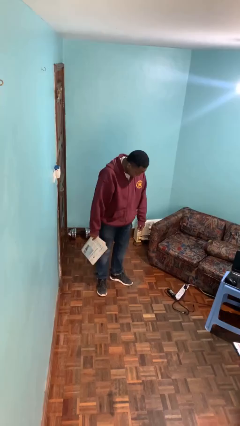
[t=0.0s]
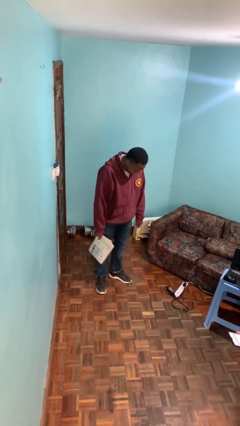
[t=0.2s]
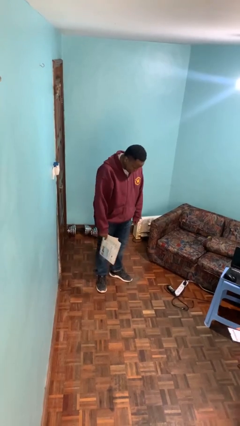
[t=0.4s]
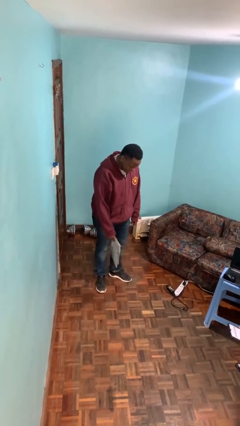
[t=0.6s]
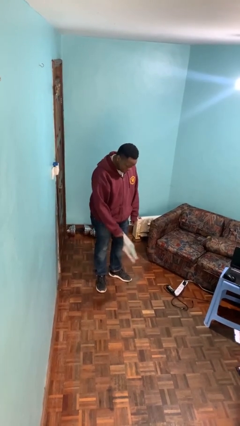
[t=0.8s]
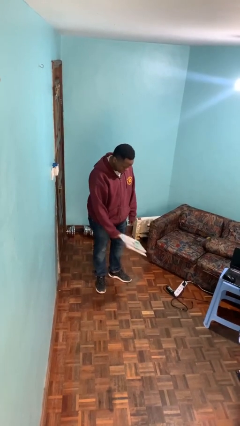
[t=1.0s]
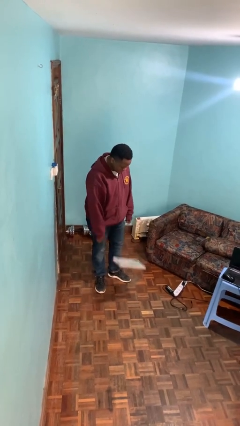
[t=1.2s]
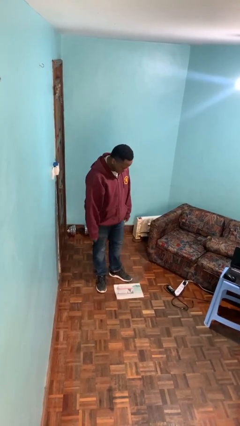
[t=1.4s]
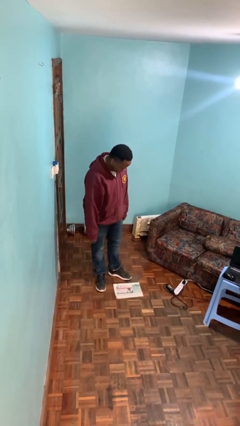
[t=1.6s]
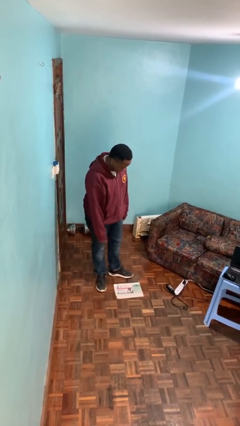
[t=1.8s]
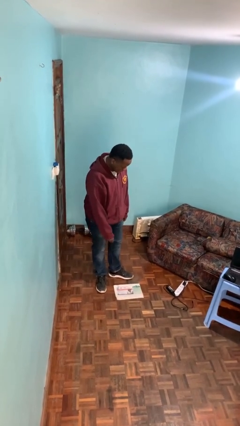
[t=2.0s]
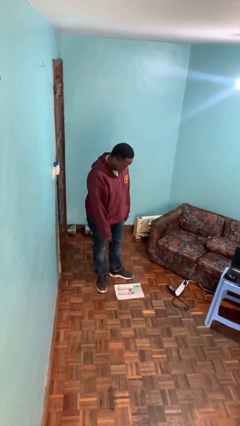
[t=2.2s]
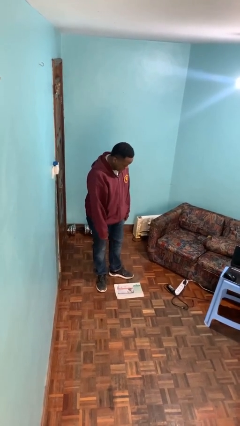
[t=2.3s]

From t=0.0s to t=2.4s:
person drops object

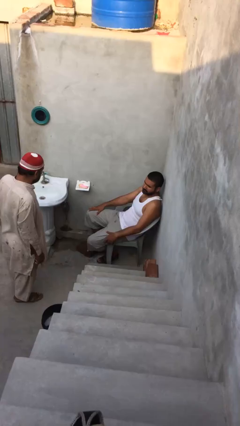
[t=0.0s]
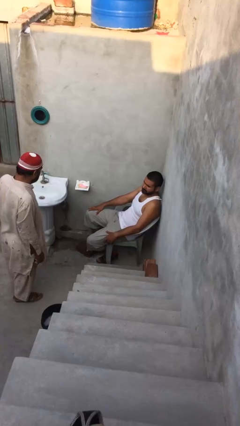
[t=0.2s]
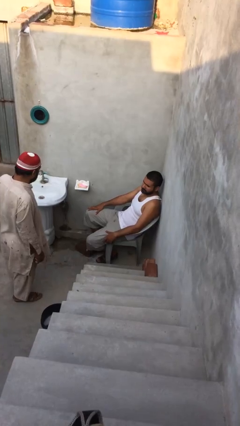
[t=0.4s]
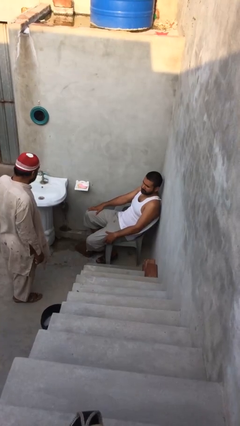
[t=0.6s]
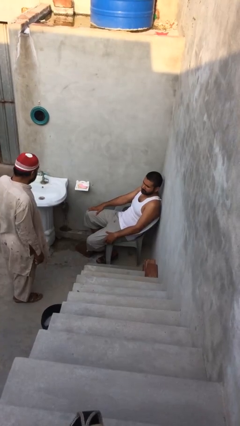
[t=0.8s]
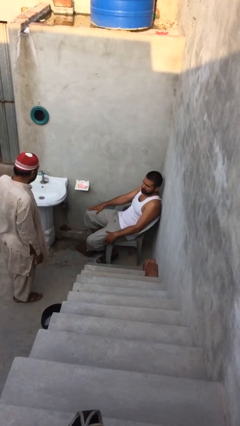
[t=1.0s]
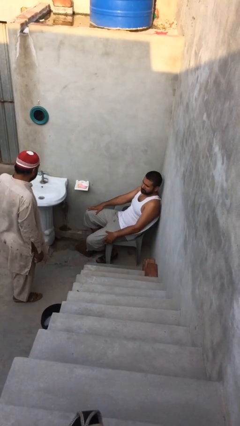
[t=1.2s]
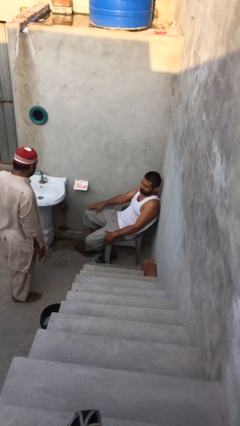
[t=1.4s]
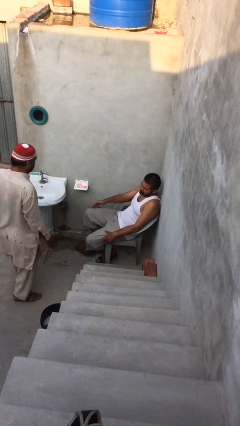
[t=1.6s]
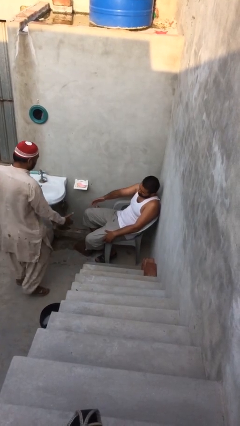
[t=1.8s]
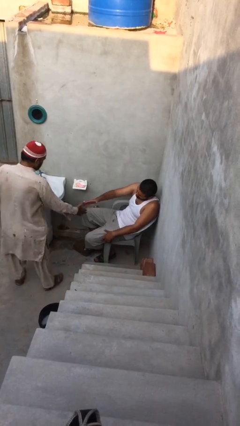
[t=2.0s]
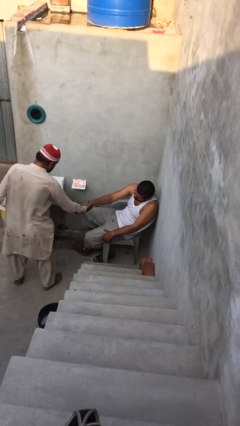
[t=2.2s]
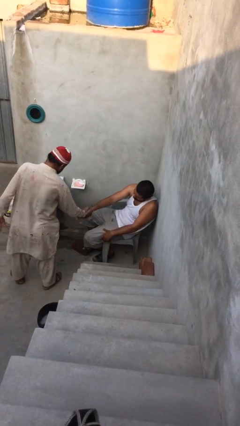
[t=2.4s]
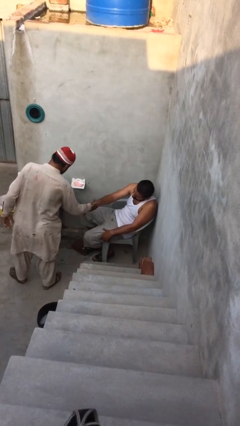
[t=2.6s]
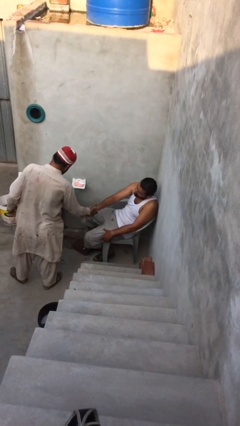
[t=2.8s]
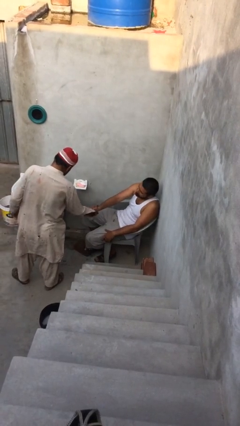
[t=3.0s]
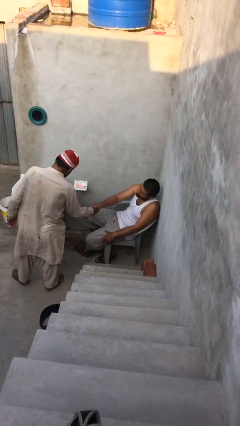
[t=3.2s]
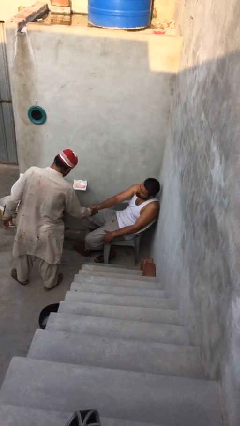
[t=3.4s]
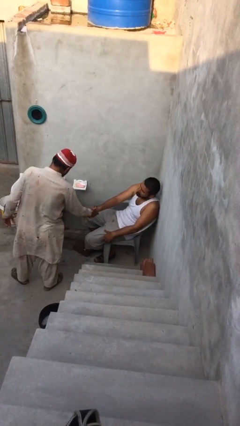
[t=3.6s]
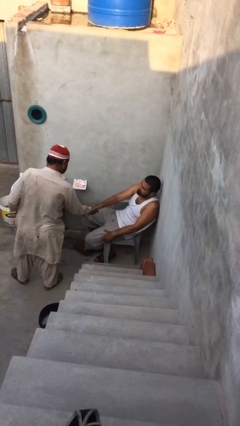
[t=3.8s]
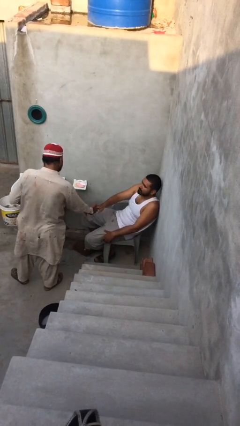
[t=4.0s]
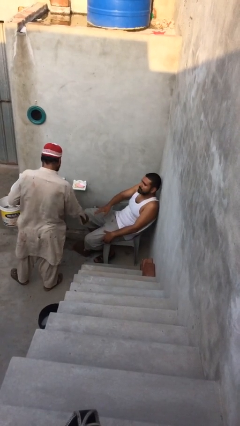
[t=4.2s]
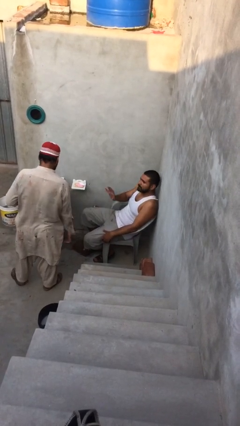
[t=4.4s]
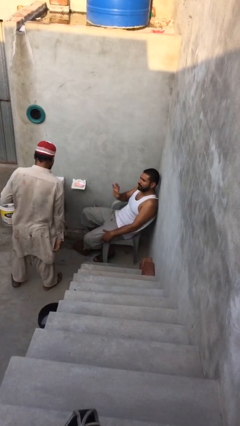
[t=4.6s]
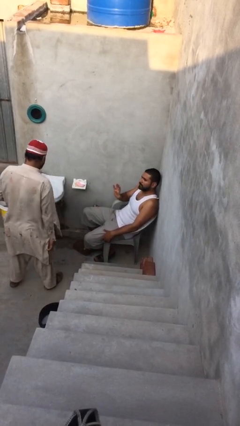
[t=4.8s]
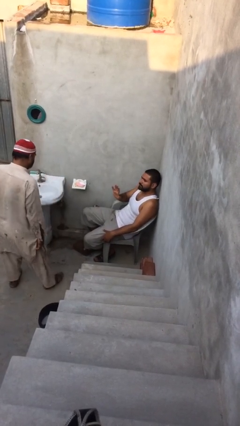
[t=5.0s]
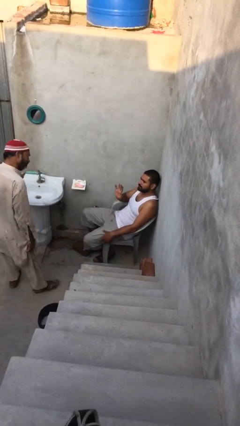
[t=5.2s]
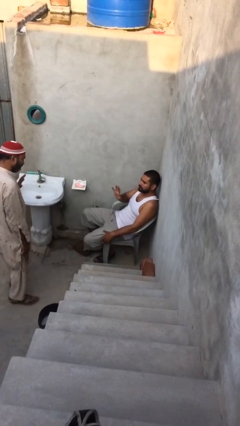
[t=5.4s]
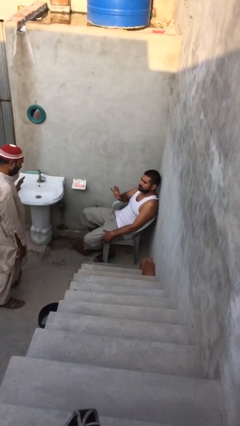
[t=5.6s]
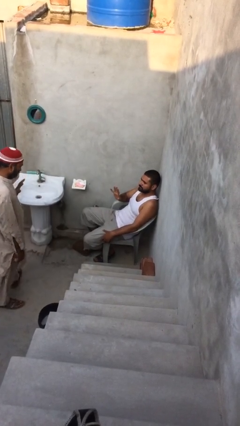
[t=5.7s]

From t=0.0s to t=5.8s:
person shakes hand

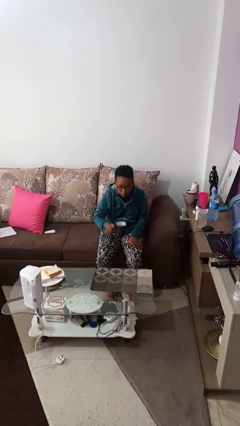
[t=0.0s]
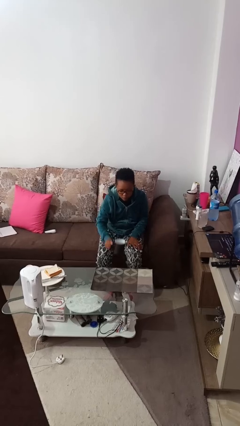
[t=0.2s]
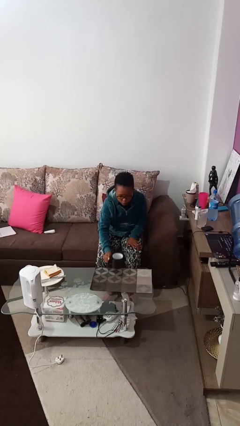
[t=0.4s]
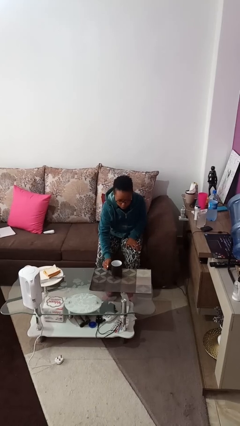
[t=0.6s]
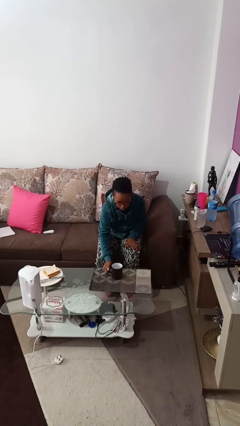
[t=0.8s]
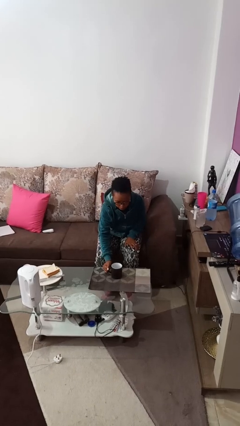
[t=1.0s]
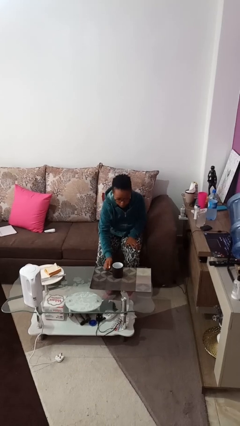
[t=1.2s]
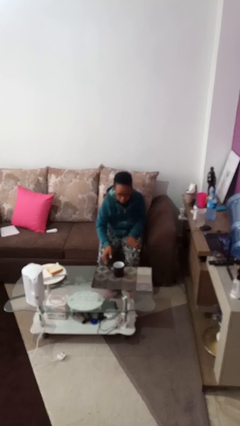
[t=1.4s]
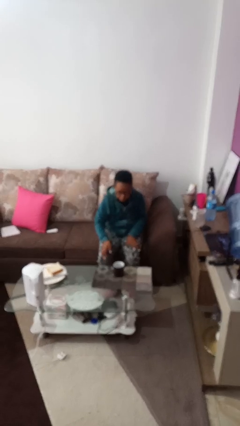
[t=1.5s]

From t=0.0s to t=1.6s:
person puts down object on table

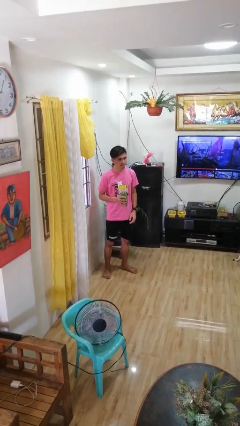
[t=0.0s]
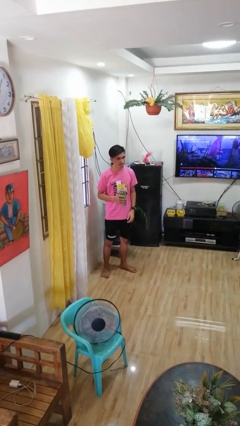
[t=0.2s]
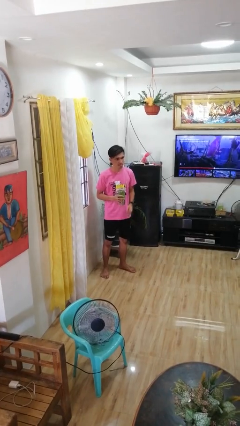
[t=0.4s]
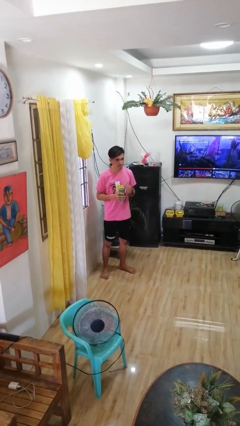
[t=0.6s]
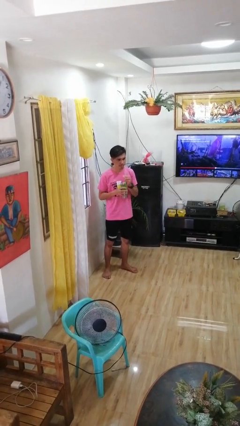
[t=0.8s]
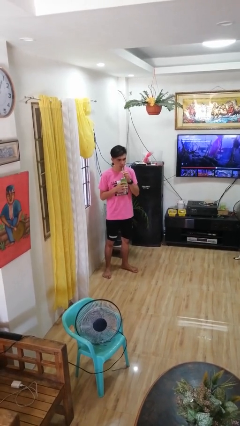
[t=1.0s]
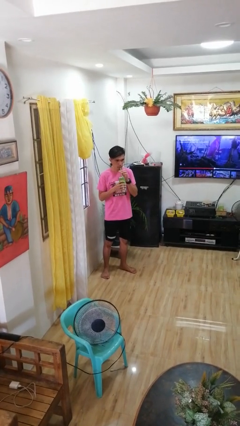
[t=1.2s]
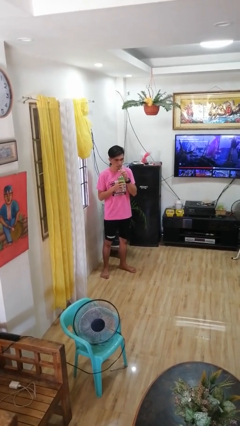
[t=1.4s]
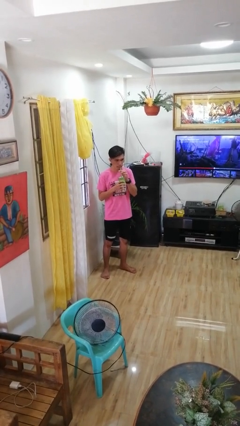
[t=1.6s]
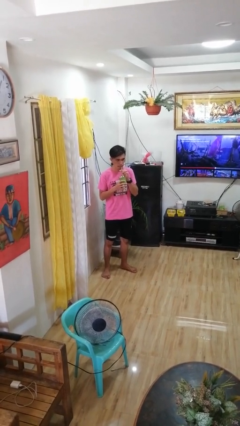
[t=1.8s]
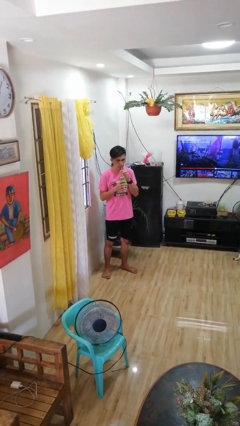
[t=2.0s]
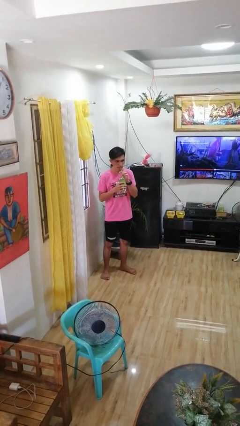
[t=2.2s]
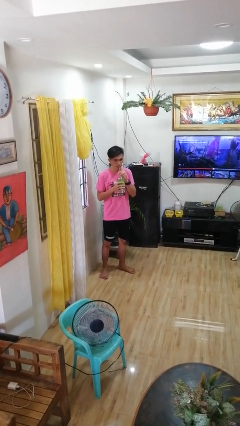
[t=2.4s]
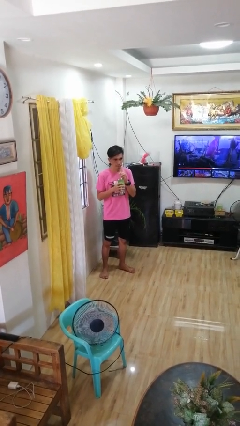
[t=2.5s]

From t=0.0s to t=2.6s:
person drinks from straw

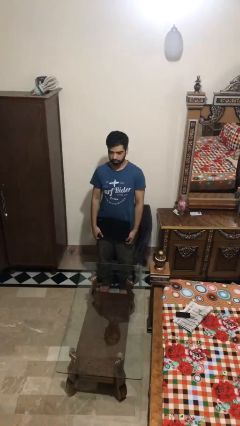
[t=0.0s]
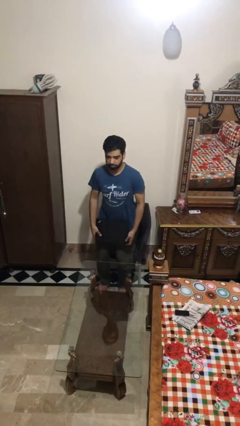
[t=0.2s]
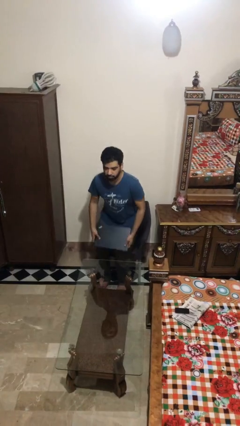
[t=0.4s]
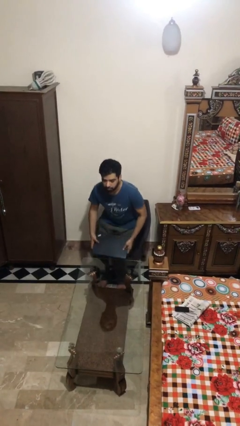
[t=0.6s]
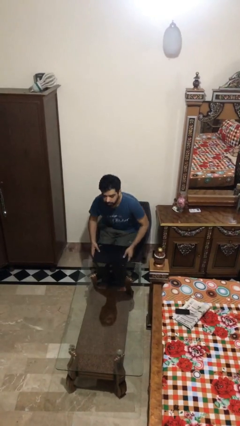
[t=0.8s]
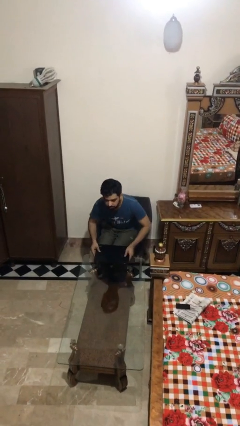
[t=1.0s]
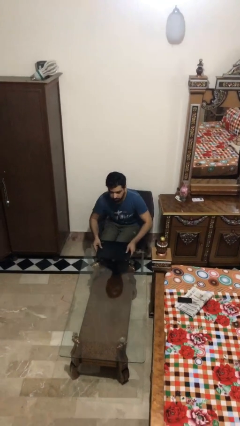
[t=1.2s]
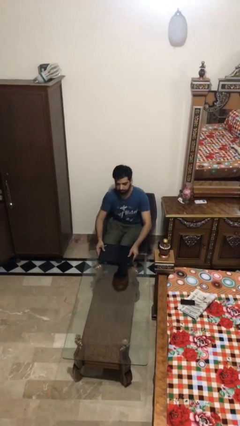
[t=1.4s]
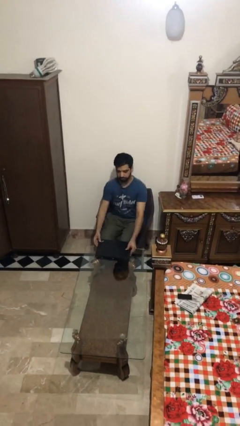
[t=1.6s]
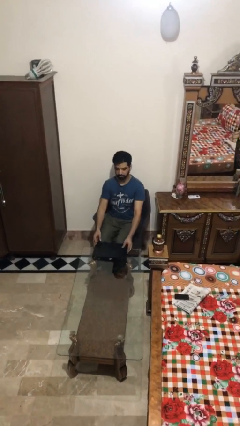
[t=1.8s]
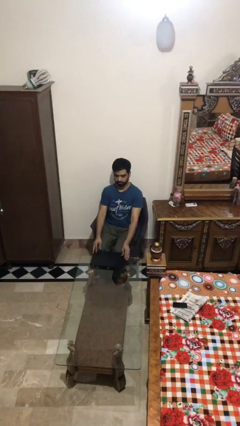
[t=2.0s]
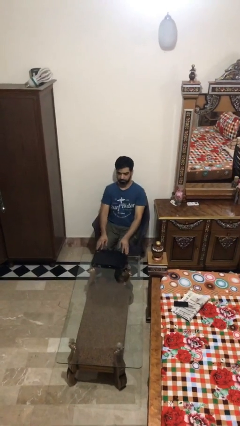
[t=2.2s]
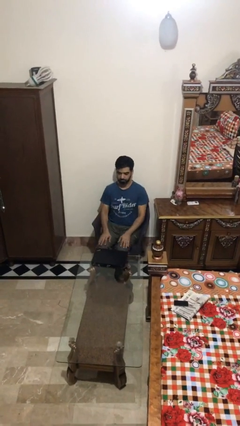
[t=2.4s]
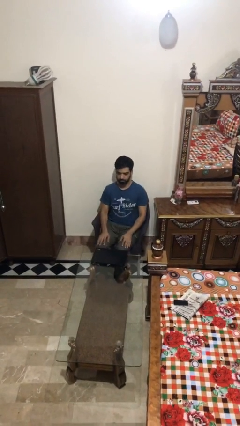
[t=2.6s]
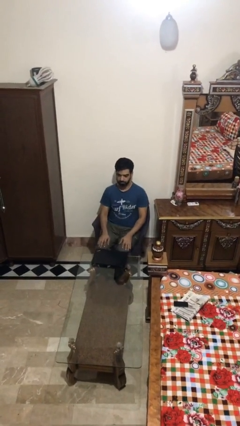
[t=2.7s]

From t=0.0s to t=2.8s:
person sits down

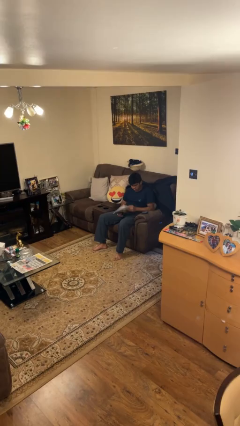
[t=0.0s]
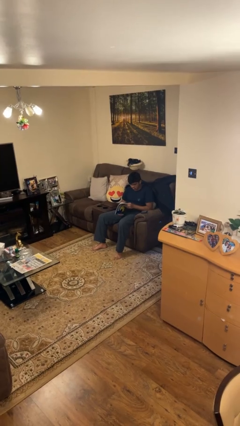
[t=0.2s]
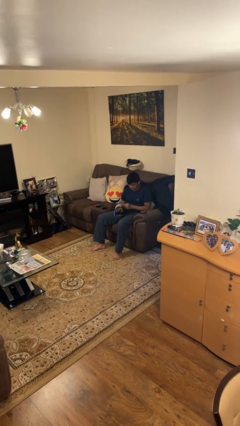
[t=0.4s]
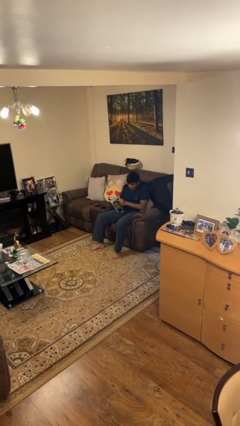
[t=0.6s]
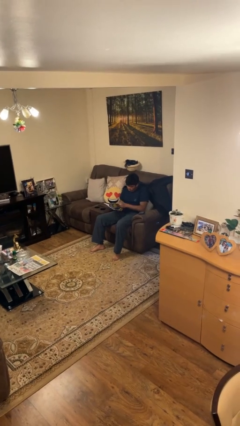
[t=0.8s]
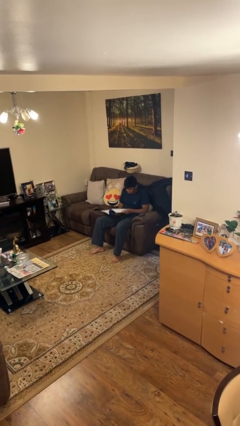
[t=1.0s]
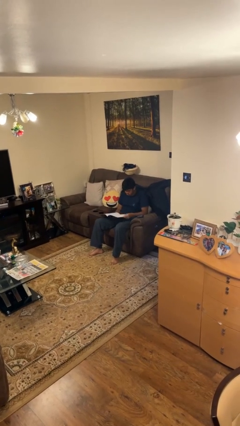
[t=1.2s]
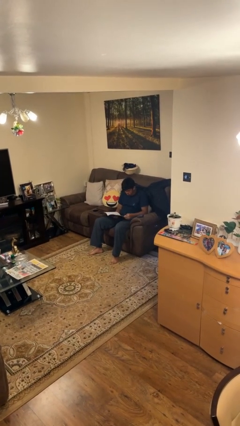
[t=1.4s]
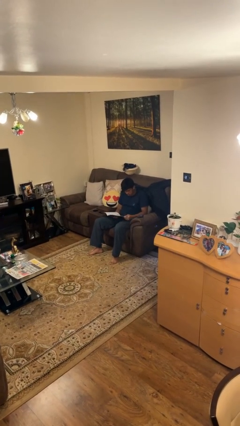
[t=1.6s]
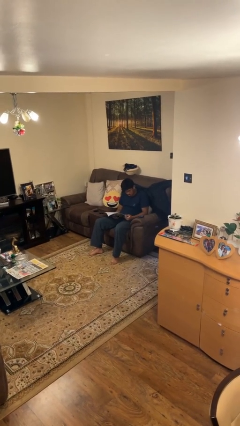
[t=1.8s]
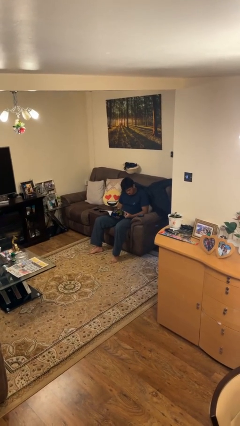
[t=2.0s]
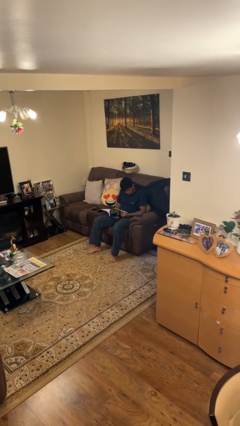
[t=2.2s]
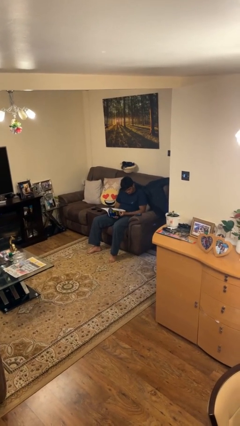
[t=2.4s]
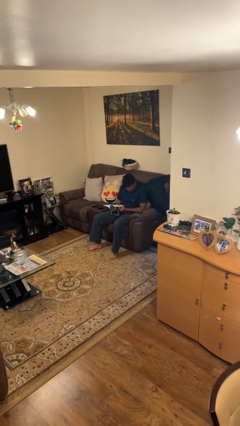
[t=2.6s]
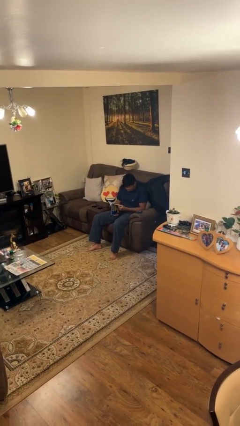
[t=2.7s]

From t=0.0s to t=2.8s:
person reads magazine
